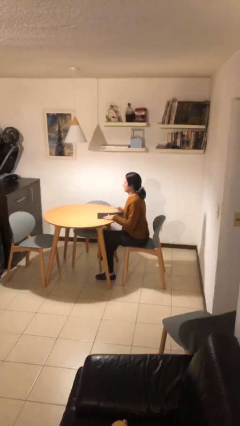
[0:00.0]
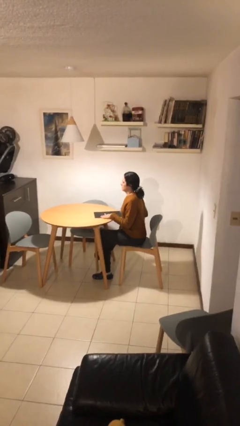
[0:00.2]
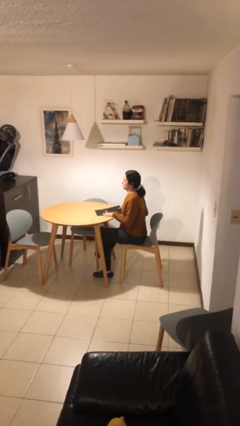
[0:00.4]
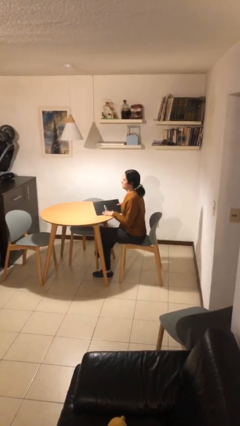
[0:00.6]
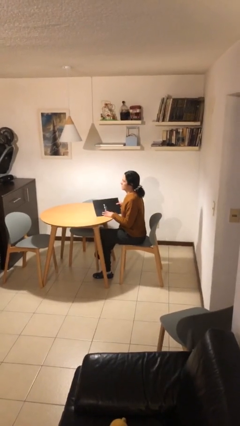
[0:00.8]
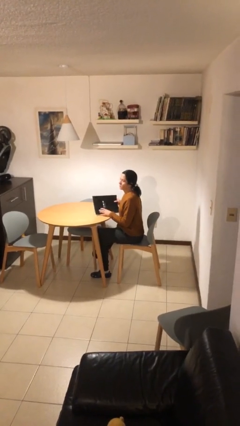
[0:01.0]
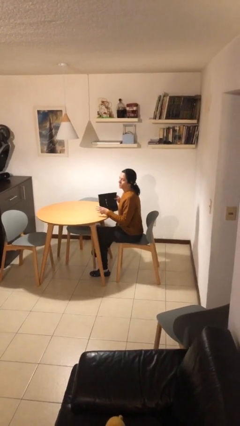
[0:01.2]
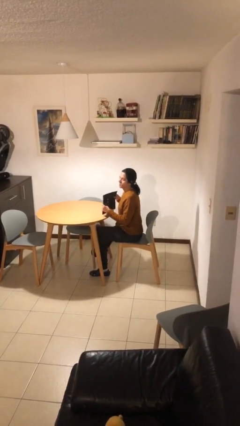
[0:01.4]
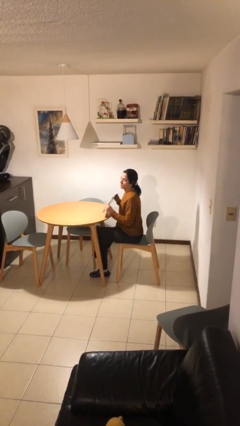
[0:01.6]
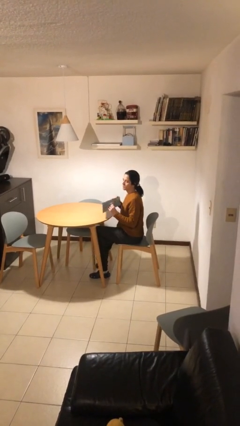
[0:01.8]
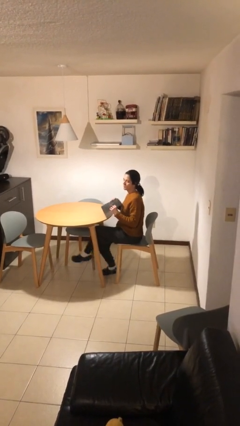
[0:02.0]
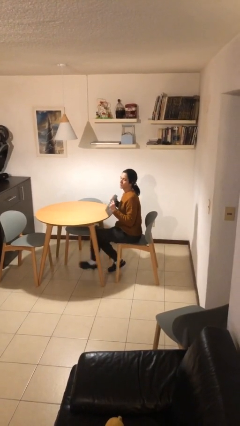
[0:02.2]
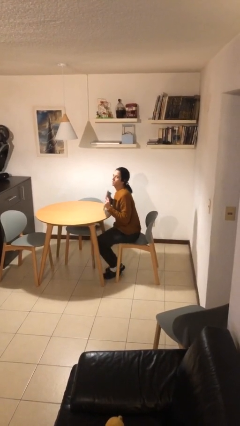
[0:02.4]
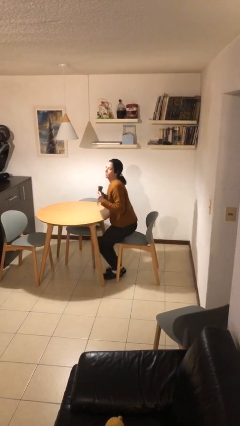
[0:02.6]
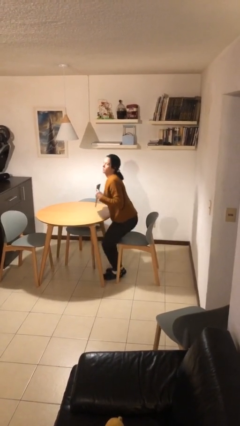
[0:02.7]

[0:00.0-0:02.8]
person sits down

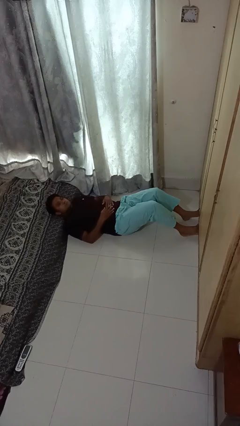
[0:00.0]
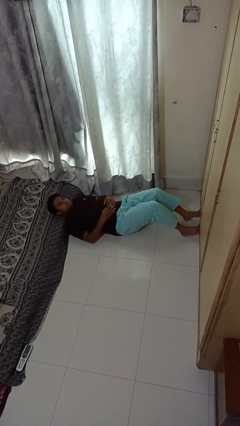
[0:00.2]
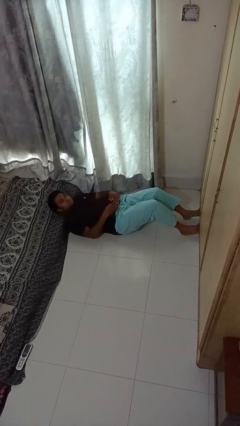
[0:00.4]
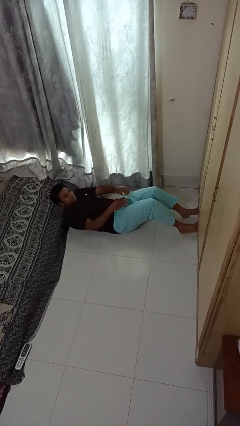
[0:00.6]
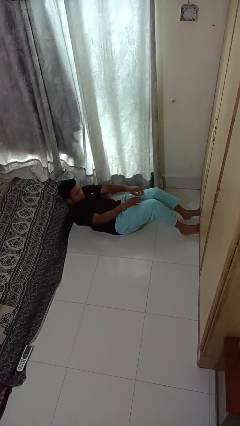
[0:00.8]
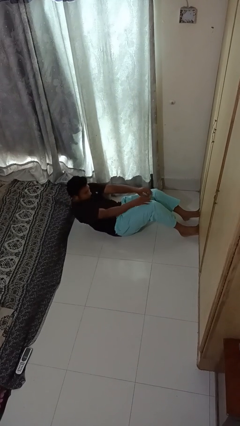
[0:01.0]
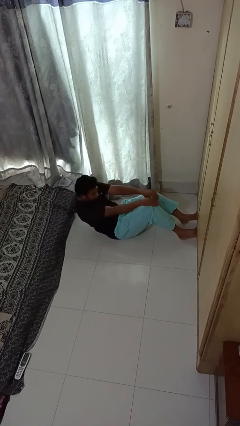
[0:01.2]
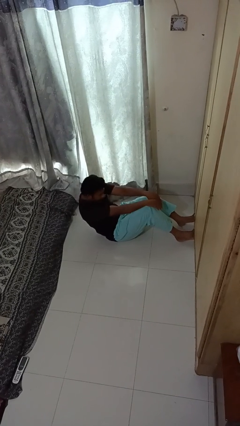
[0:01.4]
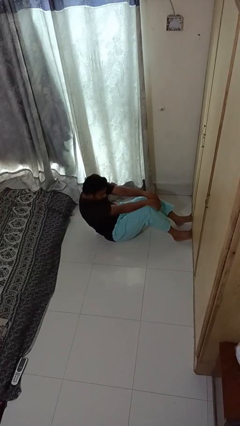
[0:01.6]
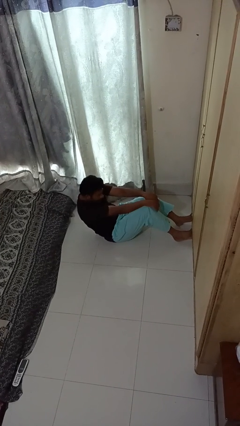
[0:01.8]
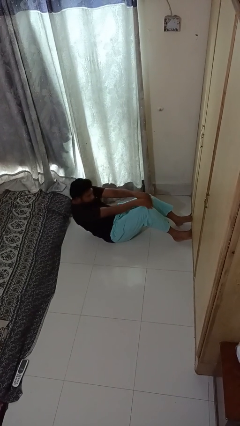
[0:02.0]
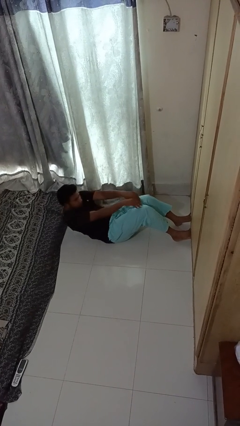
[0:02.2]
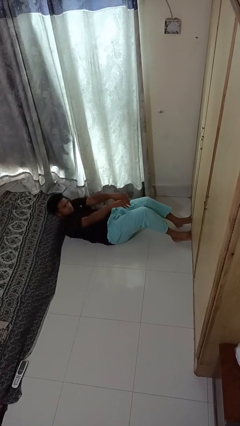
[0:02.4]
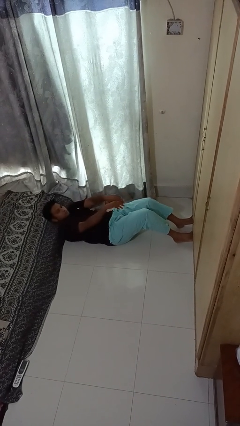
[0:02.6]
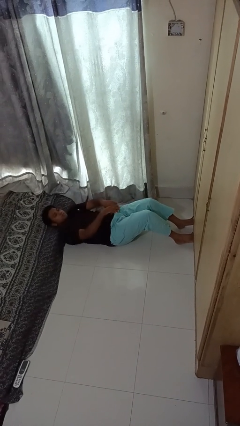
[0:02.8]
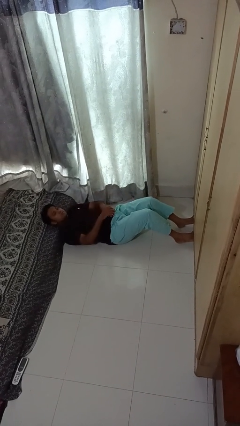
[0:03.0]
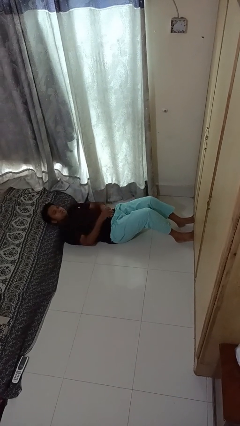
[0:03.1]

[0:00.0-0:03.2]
person exercises with situp

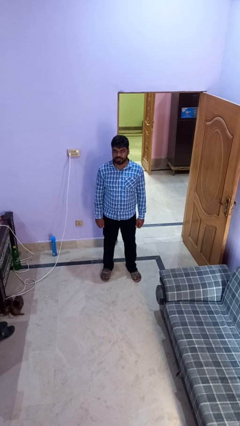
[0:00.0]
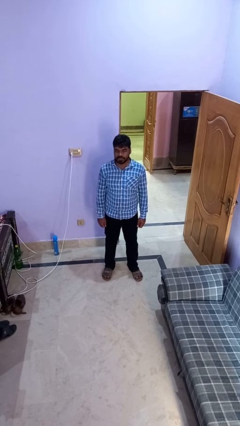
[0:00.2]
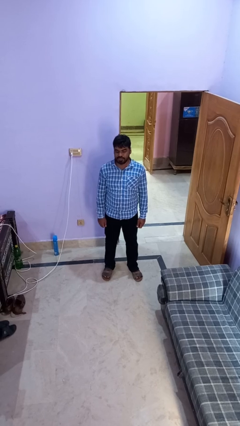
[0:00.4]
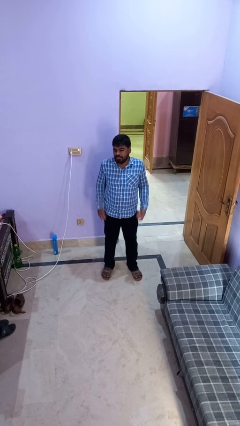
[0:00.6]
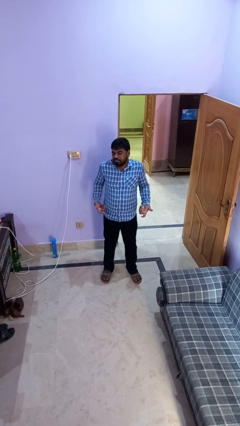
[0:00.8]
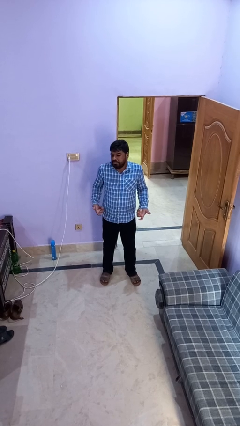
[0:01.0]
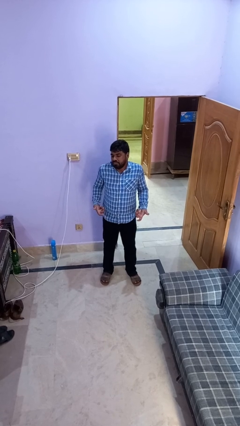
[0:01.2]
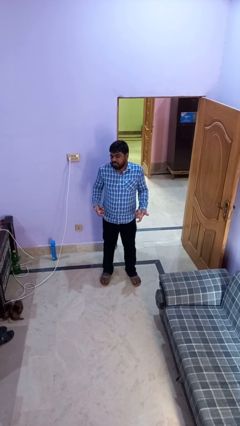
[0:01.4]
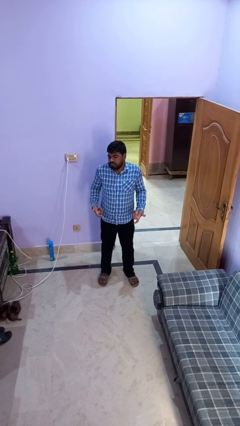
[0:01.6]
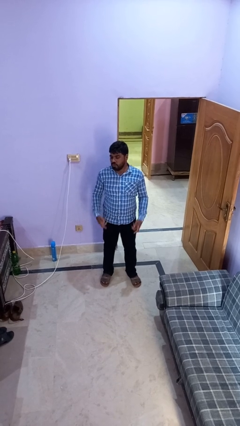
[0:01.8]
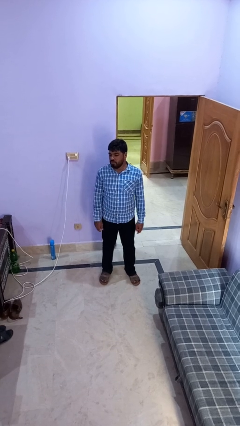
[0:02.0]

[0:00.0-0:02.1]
person shrugs

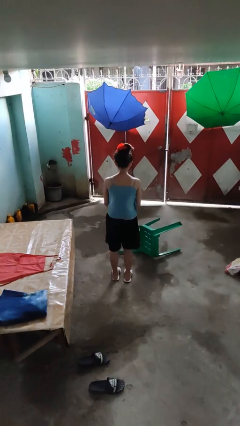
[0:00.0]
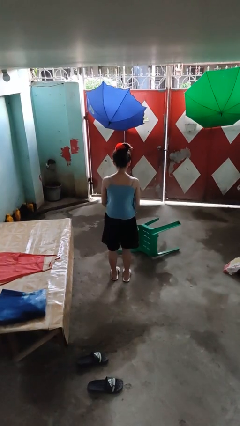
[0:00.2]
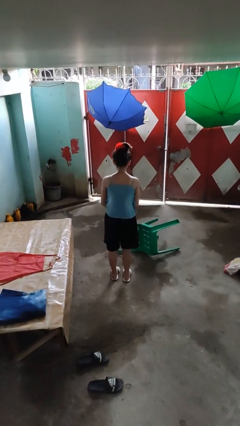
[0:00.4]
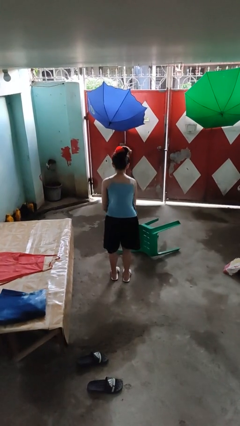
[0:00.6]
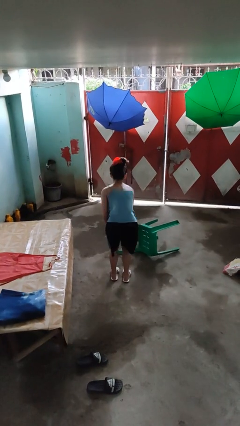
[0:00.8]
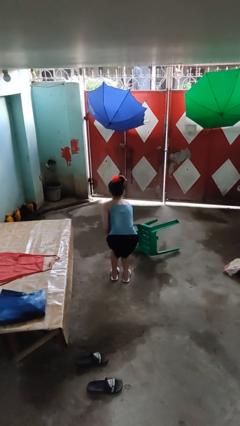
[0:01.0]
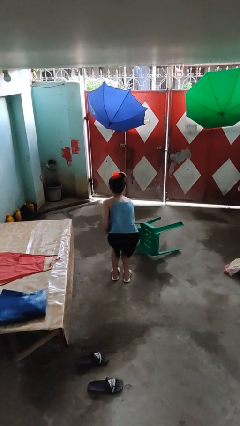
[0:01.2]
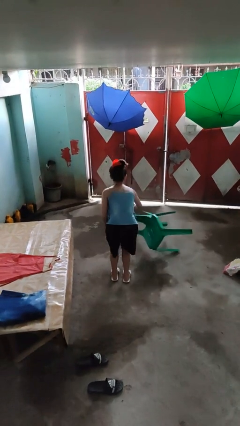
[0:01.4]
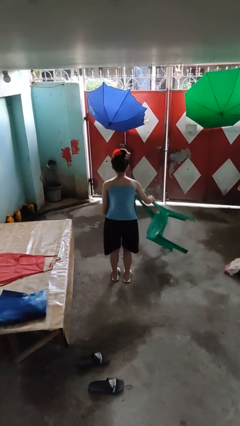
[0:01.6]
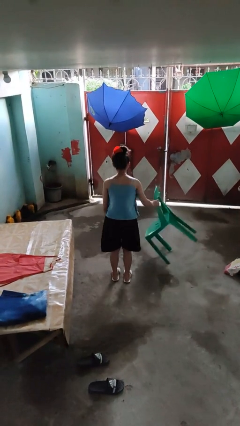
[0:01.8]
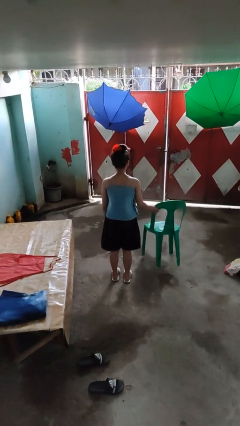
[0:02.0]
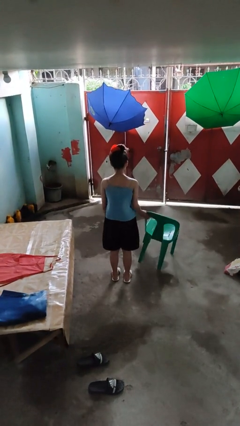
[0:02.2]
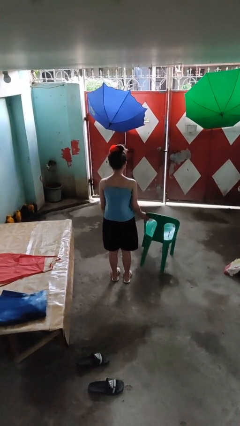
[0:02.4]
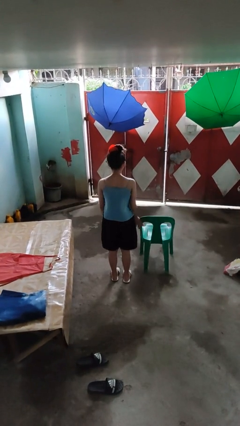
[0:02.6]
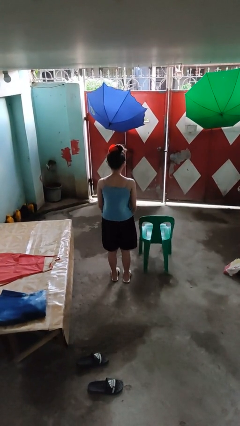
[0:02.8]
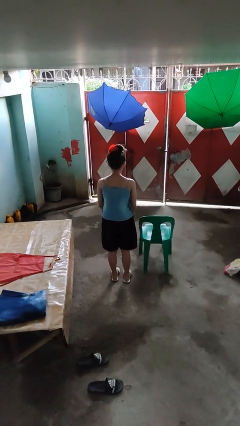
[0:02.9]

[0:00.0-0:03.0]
person sets upright furniture

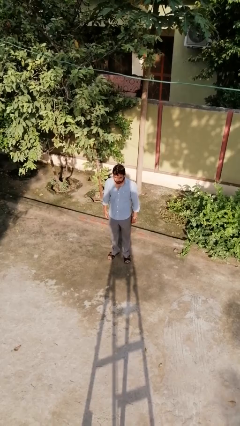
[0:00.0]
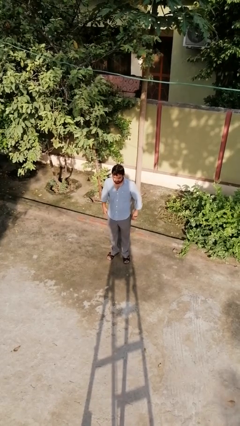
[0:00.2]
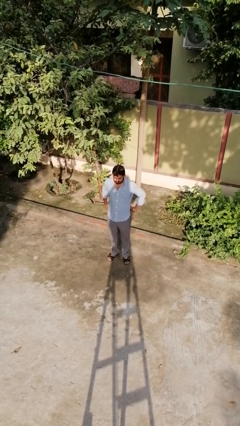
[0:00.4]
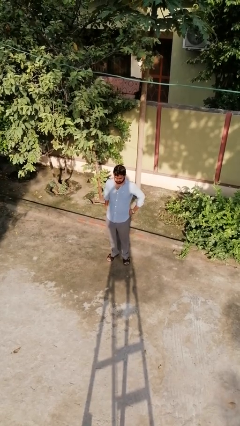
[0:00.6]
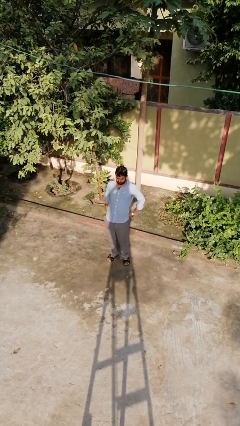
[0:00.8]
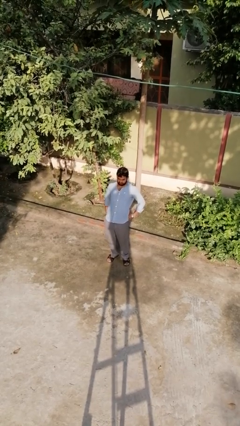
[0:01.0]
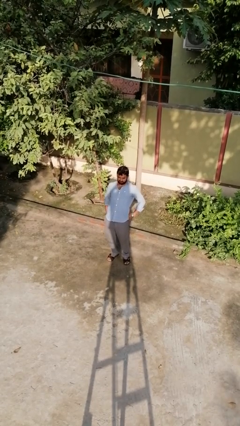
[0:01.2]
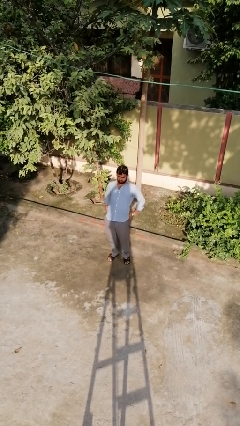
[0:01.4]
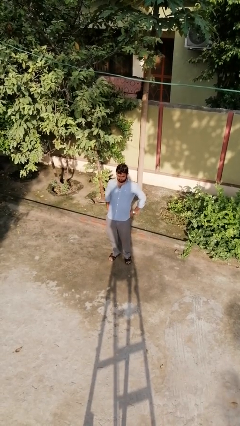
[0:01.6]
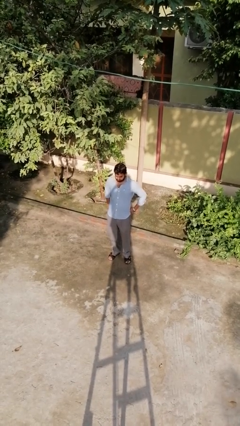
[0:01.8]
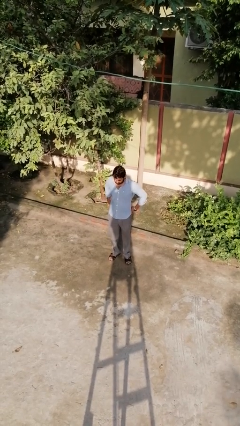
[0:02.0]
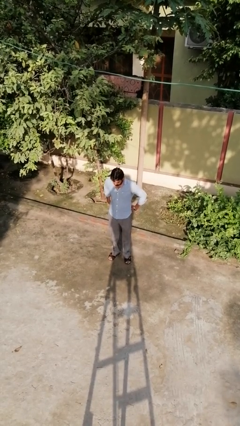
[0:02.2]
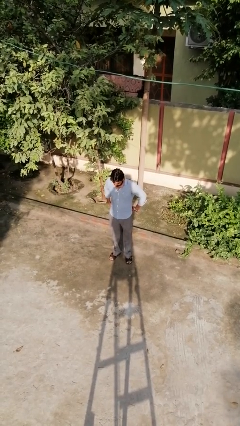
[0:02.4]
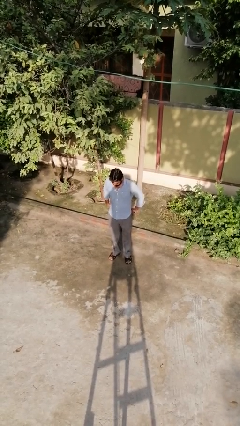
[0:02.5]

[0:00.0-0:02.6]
person stretches back

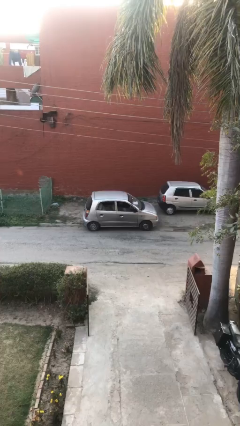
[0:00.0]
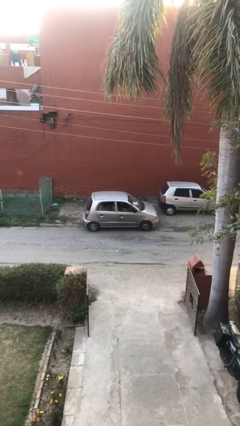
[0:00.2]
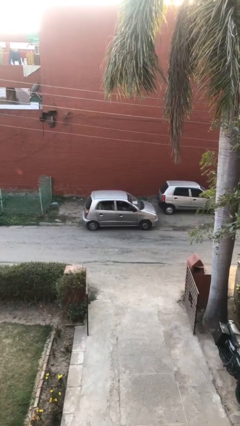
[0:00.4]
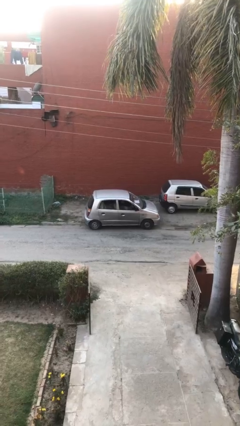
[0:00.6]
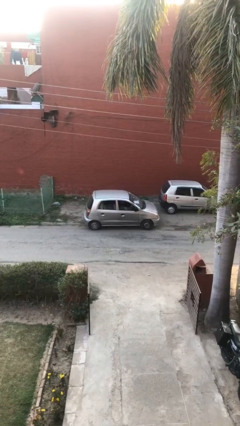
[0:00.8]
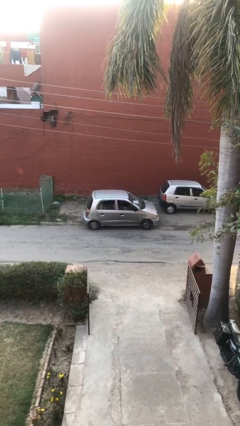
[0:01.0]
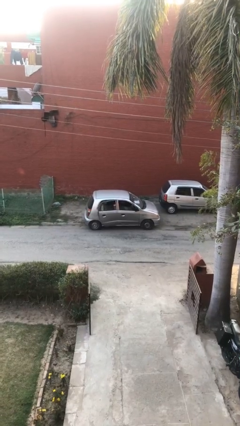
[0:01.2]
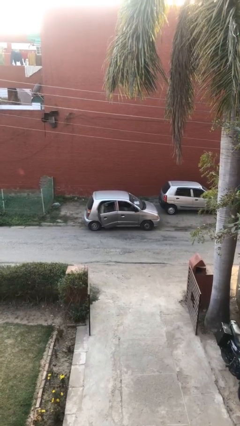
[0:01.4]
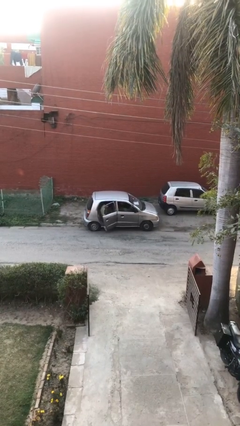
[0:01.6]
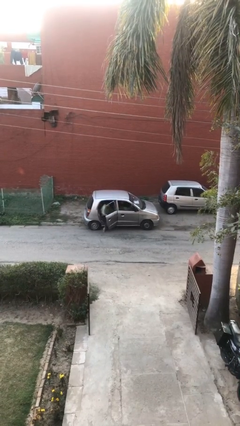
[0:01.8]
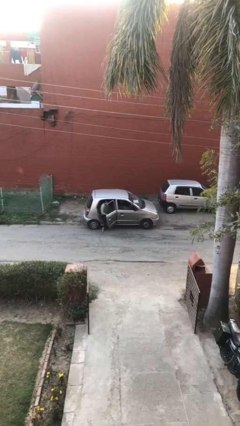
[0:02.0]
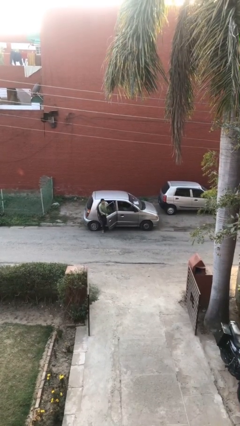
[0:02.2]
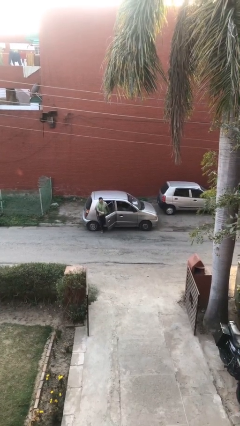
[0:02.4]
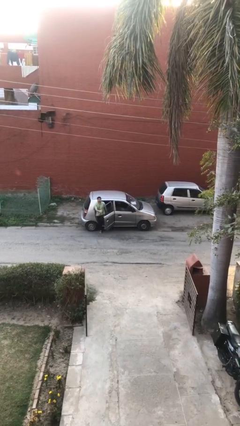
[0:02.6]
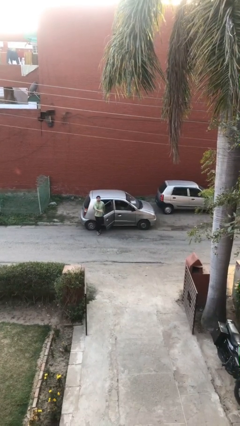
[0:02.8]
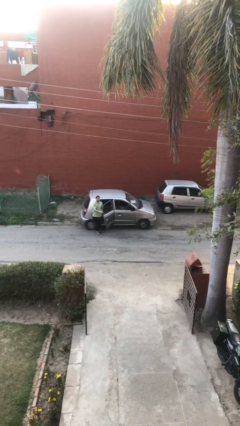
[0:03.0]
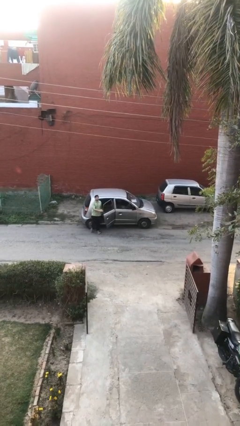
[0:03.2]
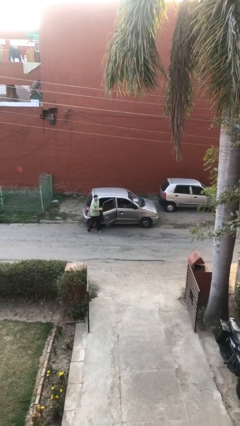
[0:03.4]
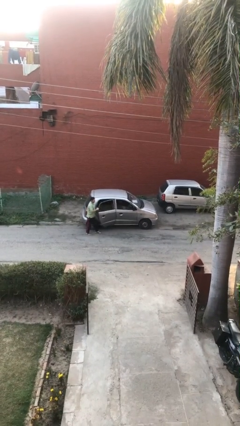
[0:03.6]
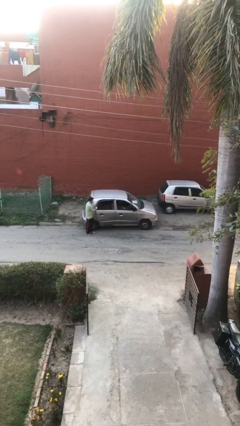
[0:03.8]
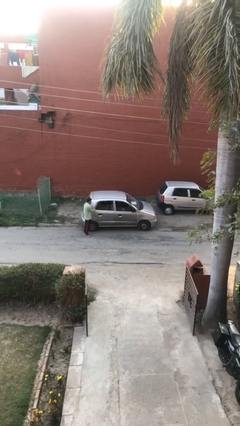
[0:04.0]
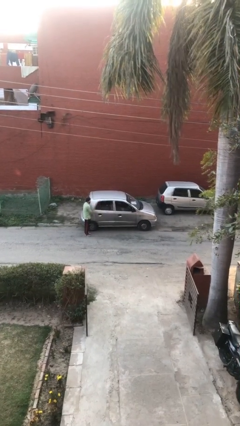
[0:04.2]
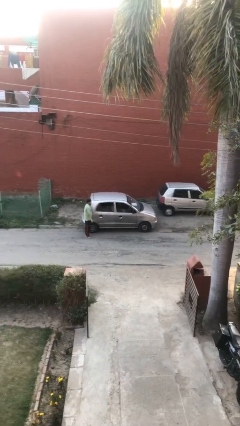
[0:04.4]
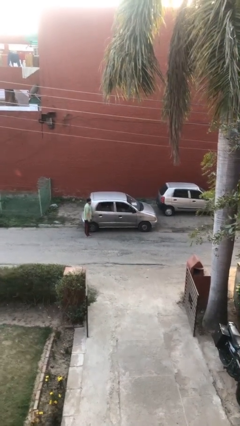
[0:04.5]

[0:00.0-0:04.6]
car drops off person
